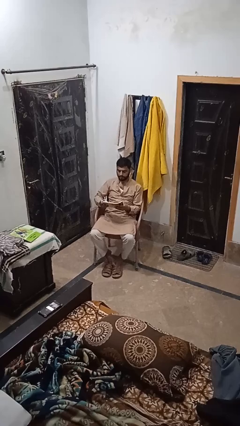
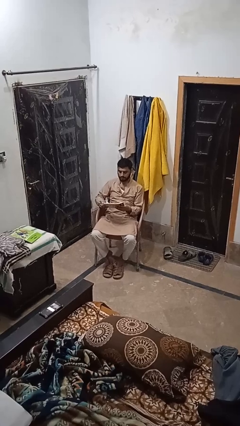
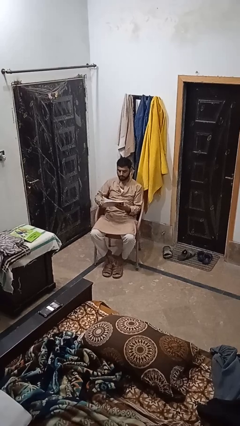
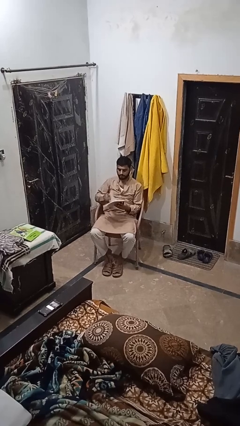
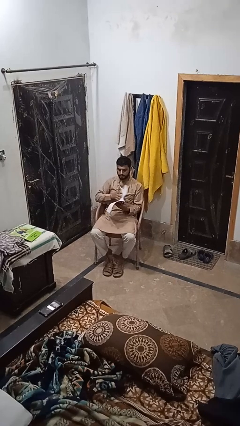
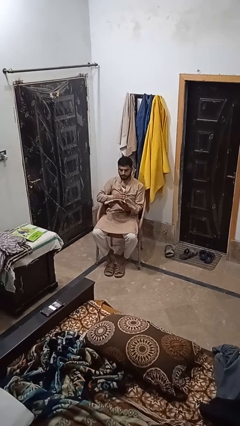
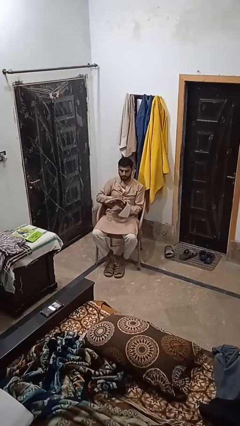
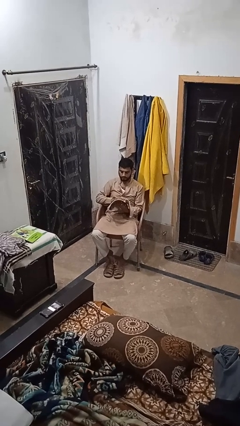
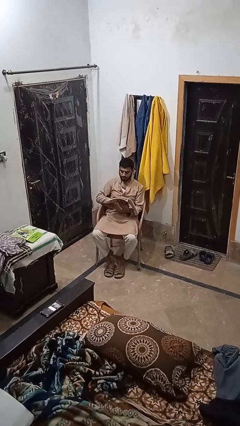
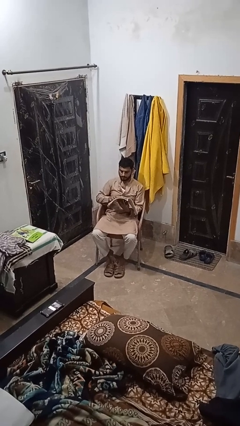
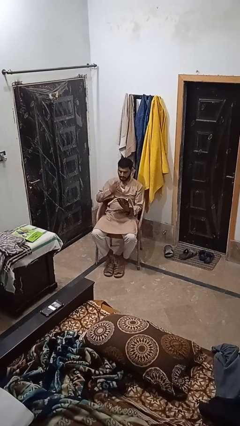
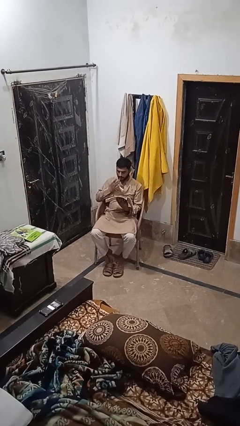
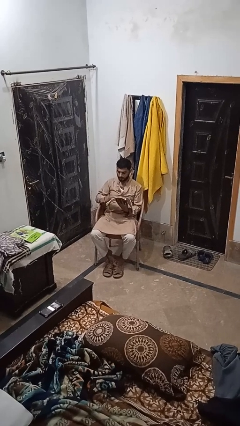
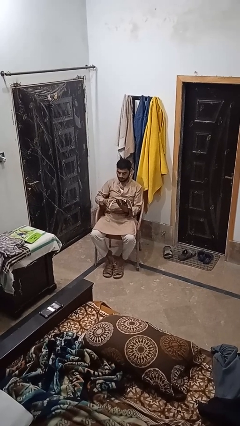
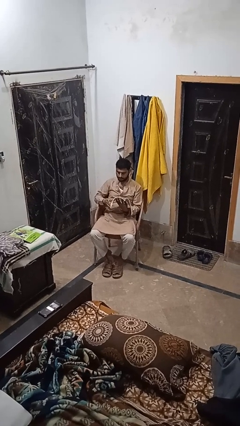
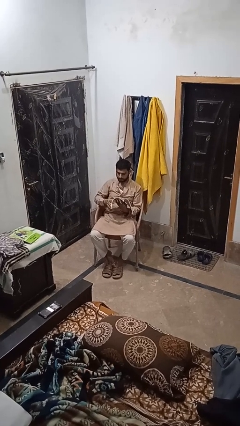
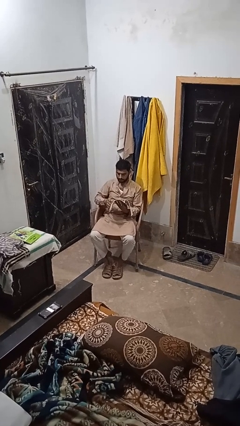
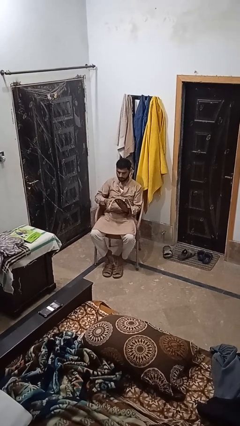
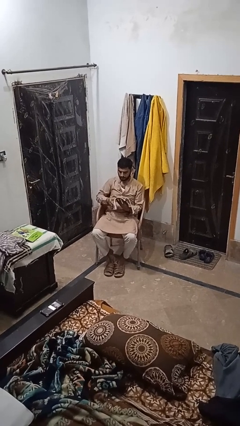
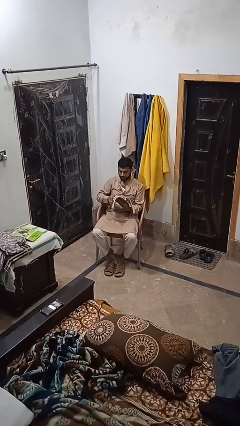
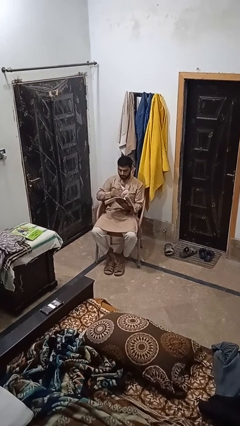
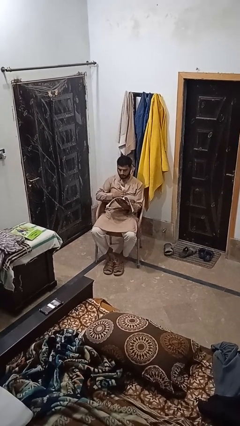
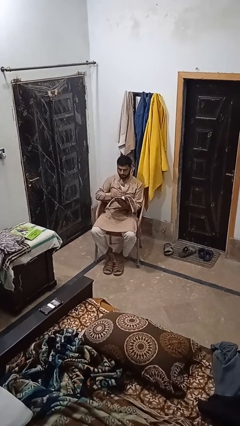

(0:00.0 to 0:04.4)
person reads book

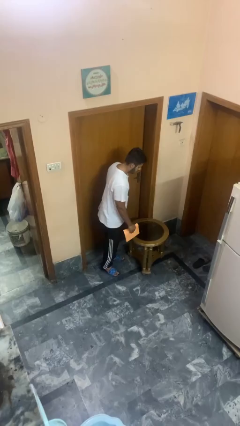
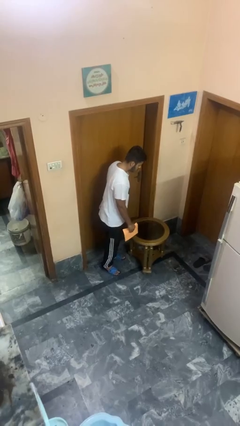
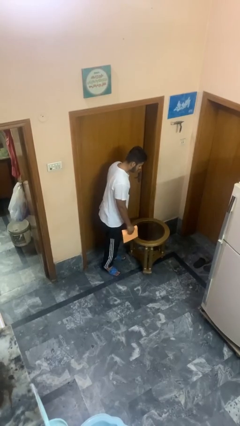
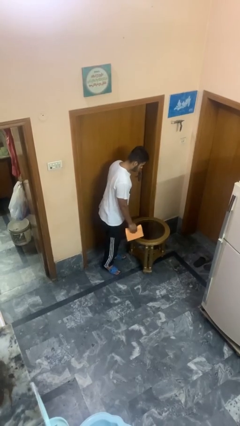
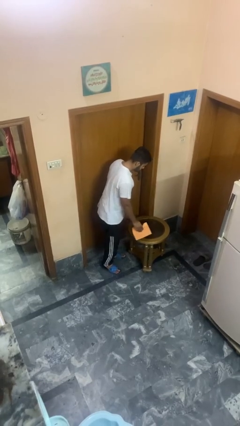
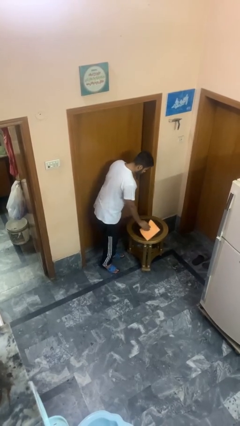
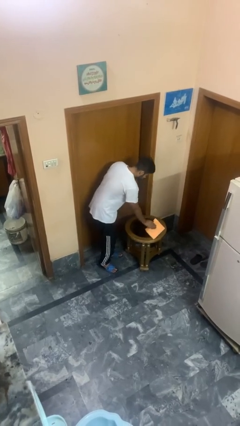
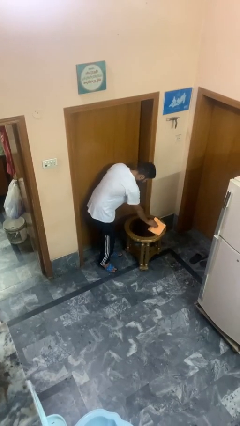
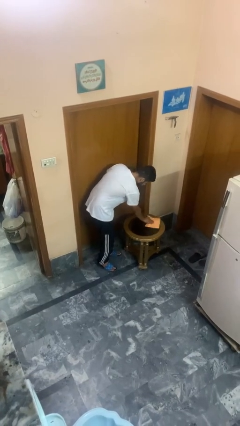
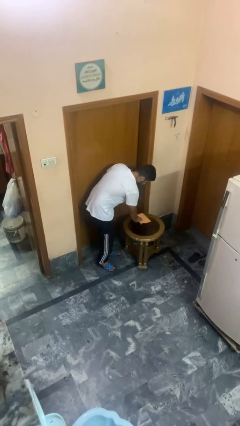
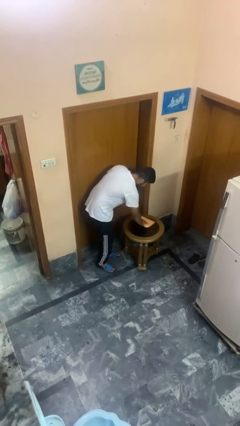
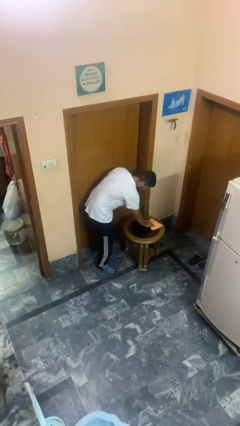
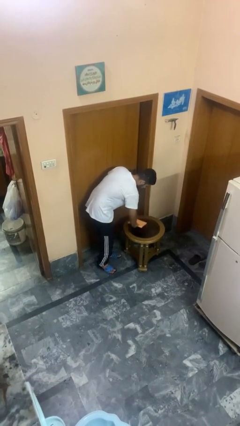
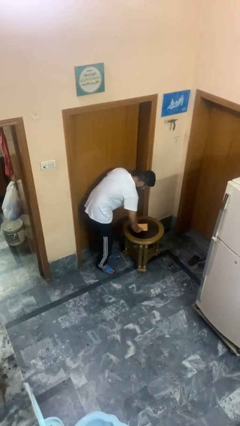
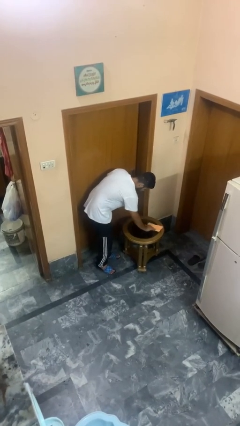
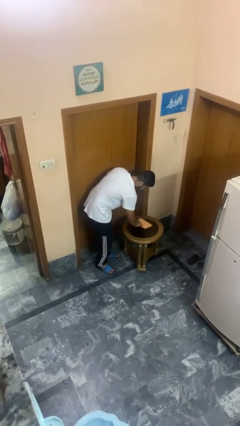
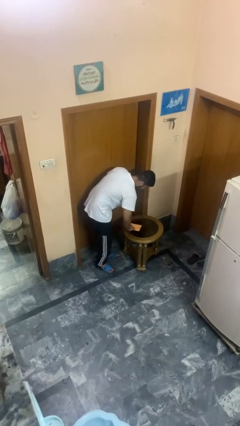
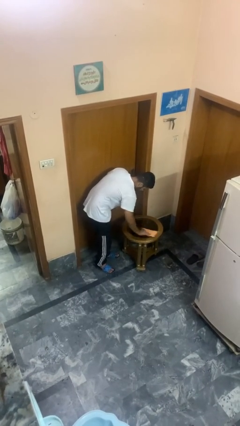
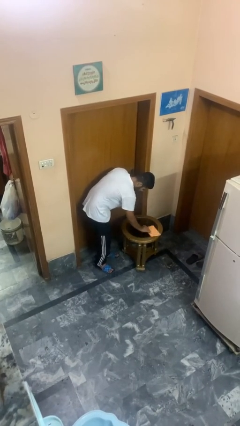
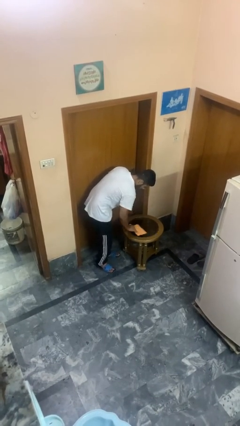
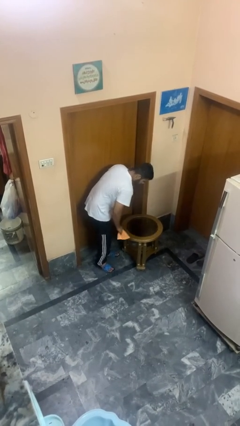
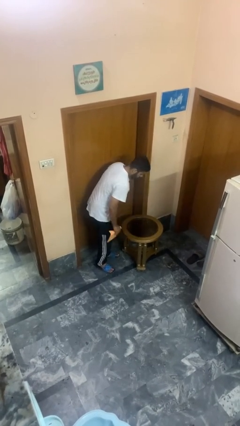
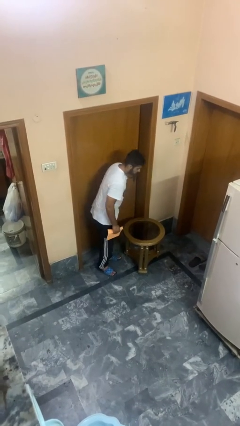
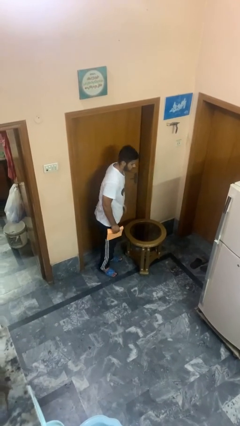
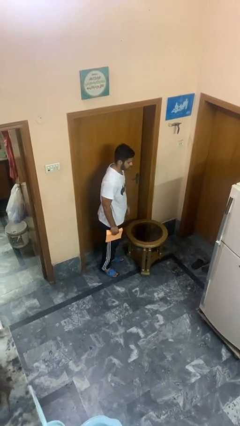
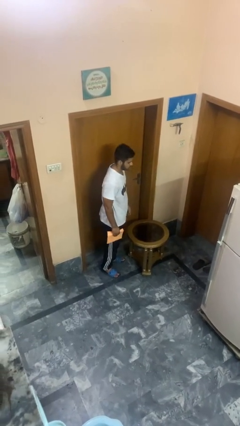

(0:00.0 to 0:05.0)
person cleans table with rag

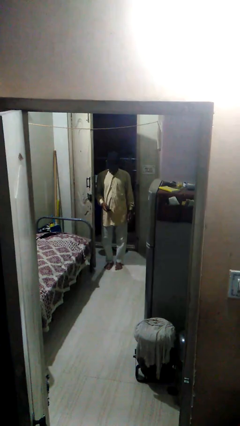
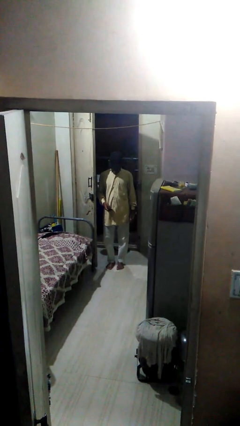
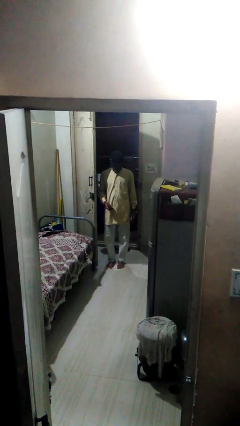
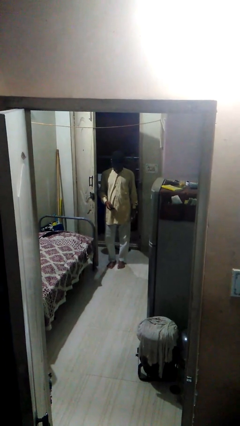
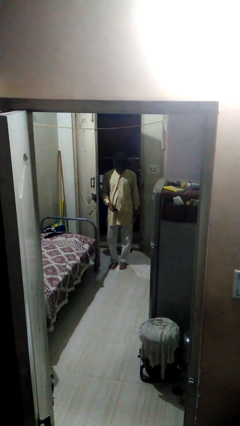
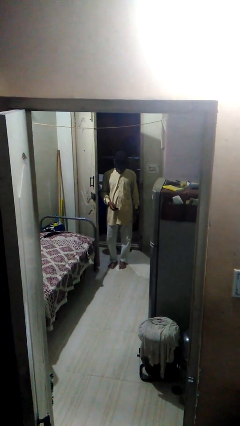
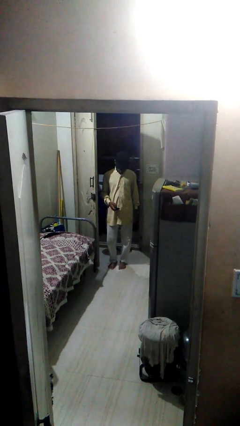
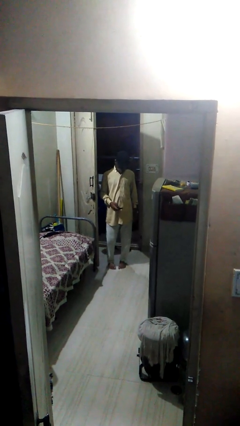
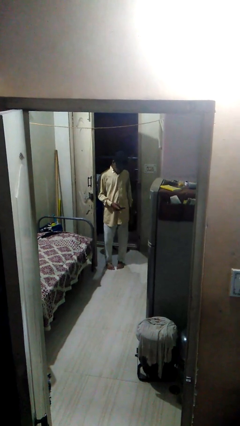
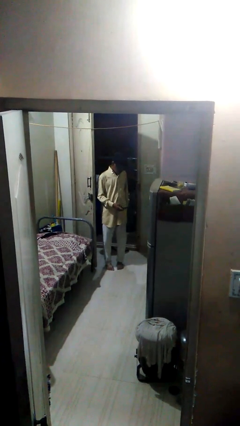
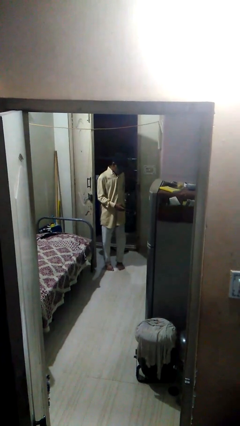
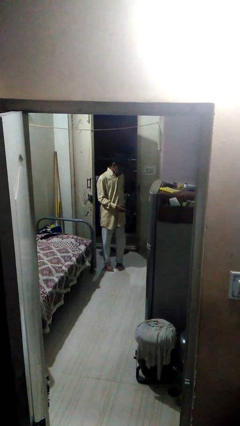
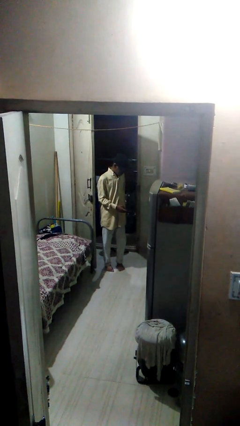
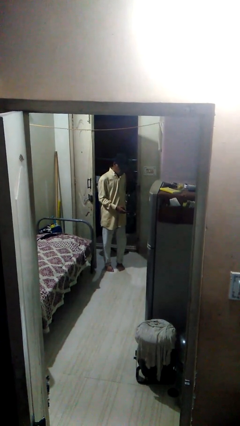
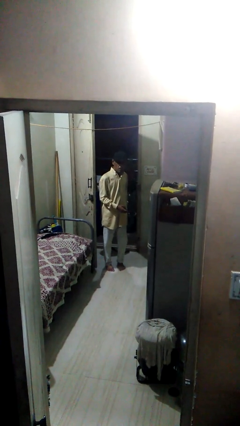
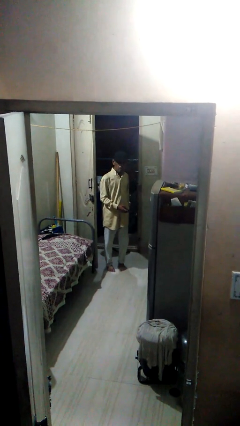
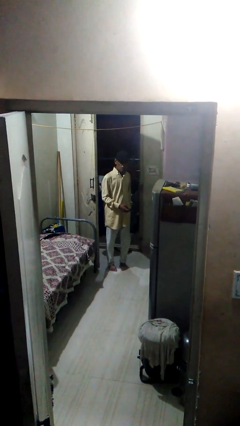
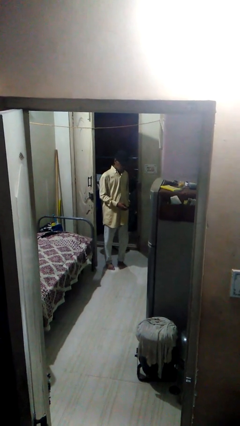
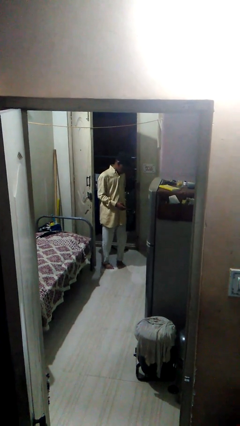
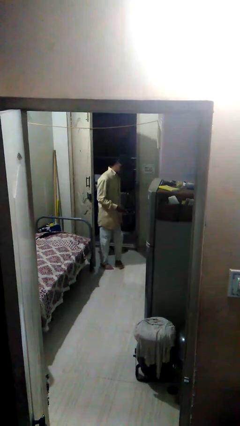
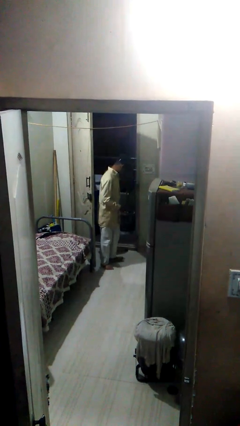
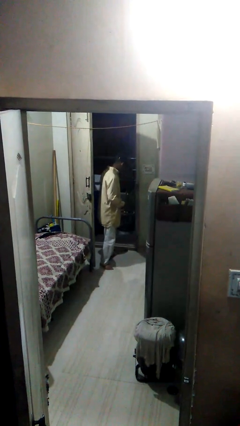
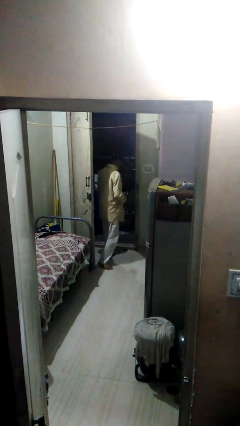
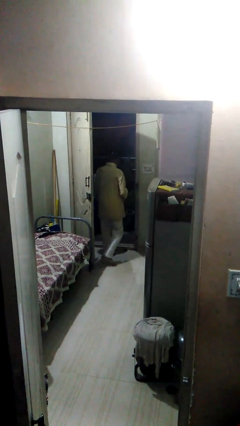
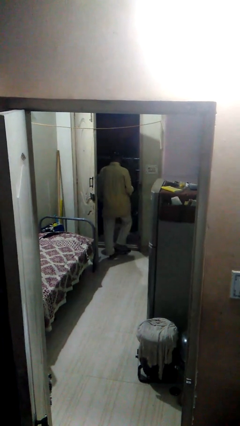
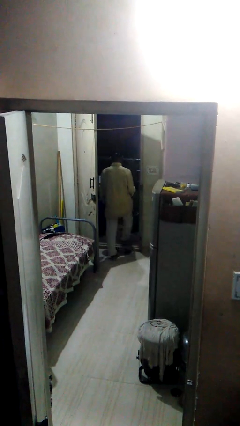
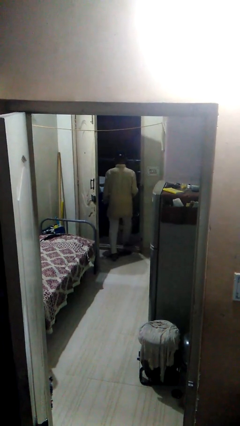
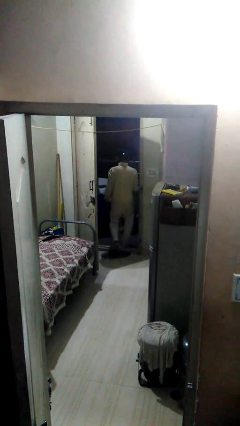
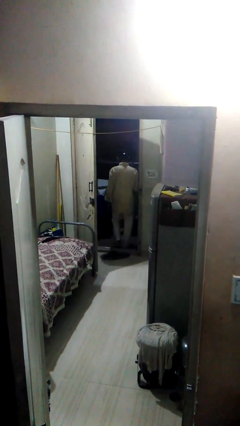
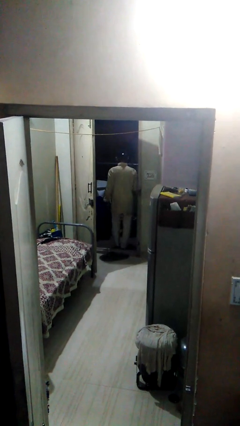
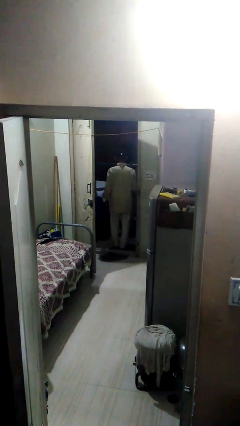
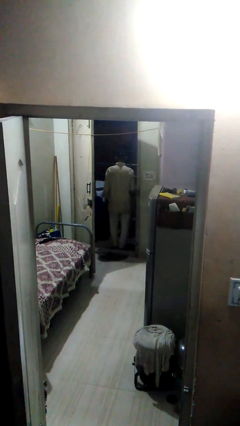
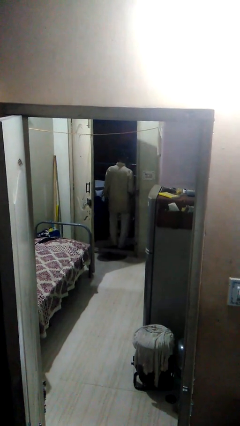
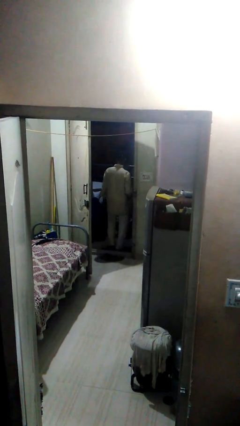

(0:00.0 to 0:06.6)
person exits scene through structure

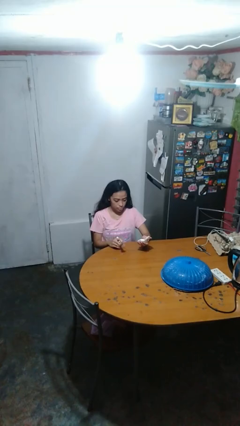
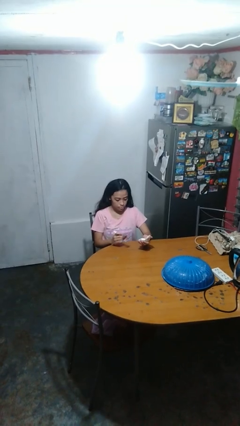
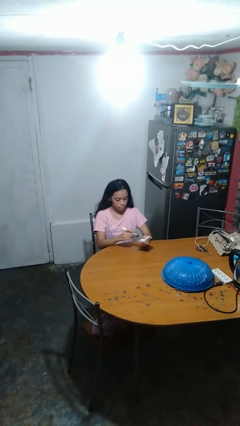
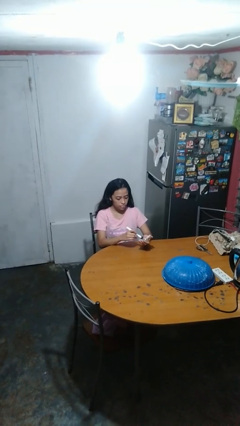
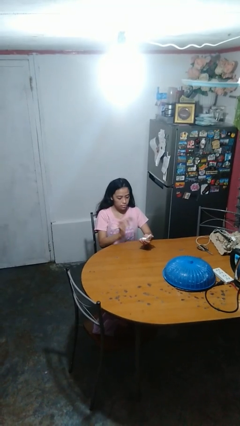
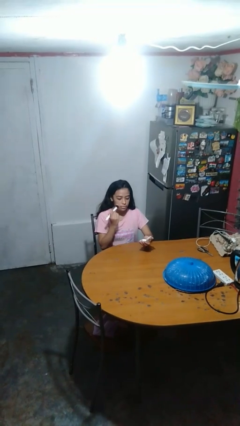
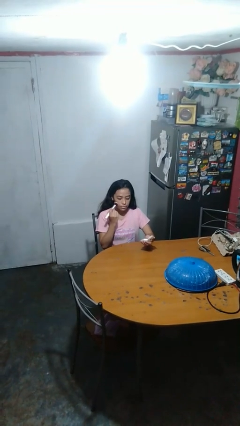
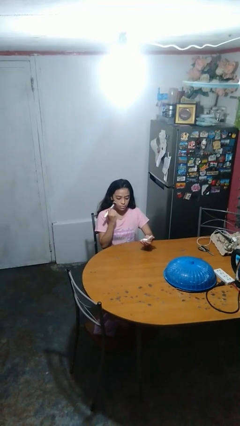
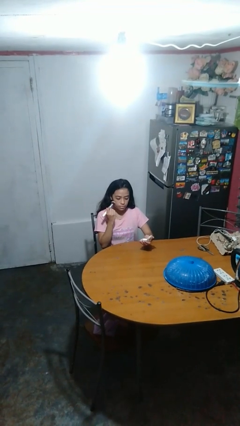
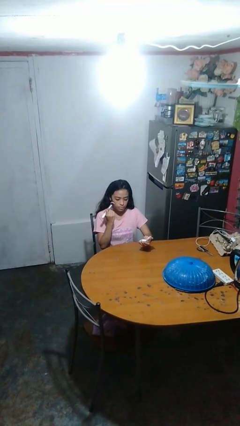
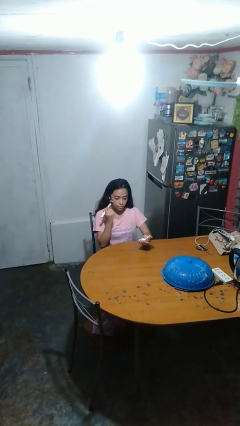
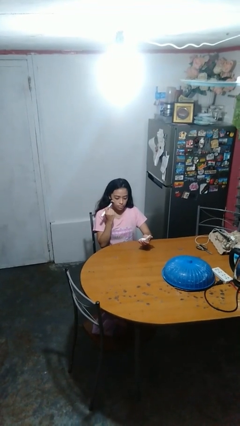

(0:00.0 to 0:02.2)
person applies foundation makeup
